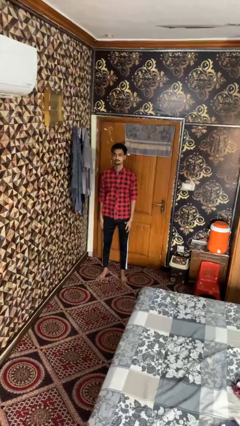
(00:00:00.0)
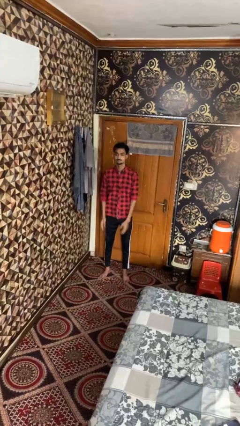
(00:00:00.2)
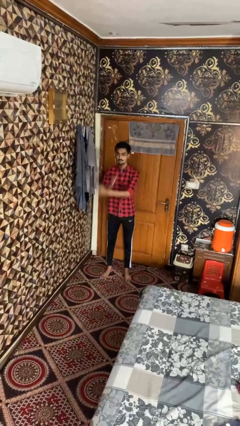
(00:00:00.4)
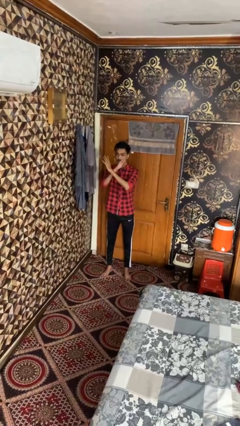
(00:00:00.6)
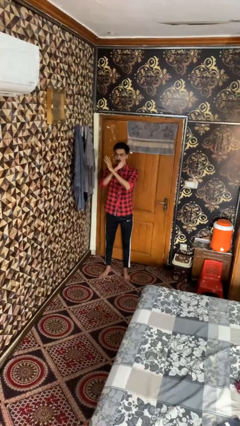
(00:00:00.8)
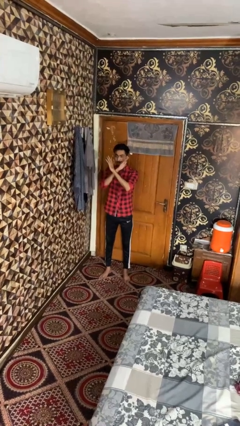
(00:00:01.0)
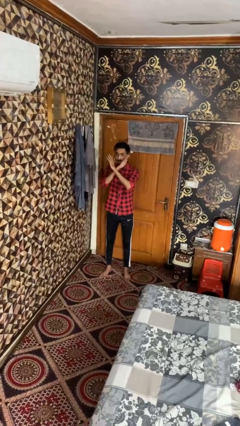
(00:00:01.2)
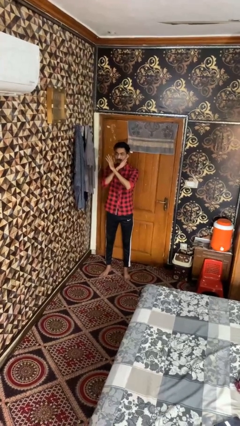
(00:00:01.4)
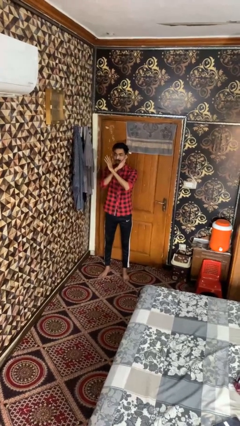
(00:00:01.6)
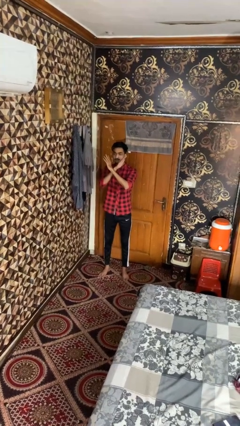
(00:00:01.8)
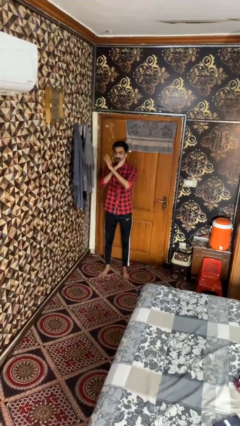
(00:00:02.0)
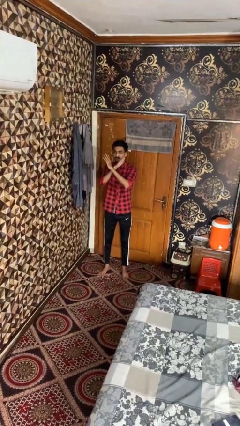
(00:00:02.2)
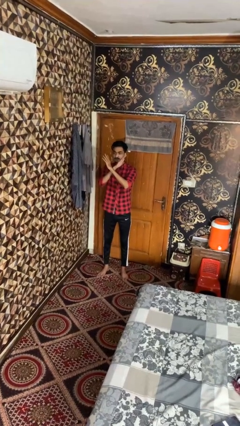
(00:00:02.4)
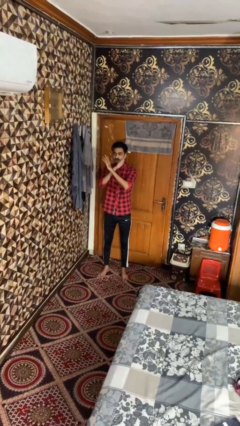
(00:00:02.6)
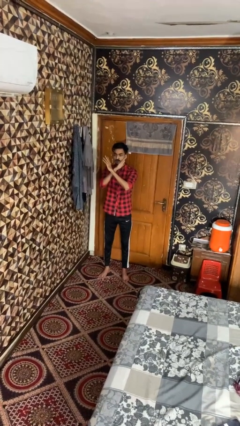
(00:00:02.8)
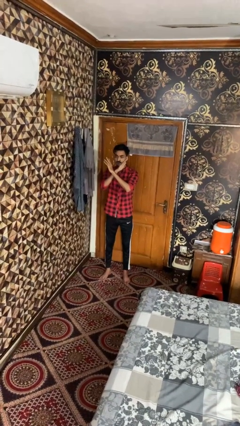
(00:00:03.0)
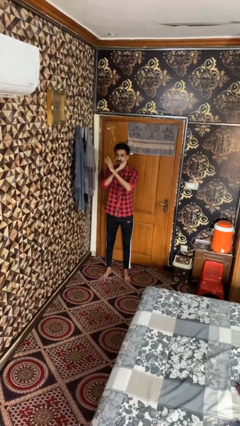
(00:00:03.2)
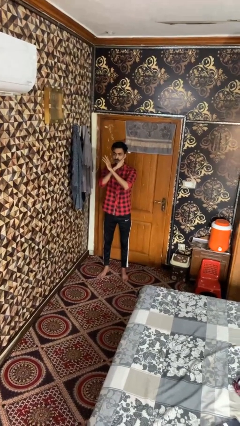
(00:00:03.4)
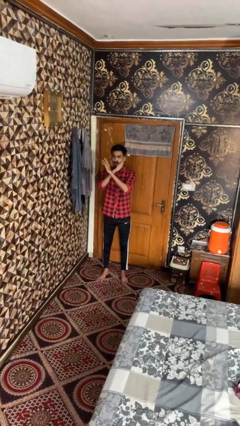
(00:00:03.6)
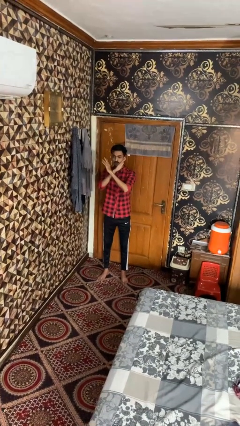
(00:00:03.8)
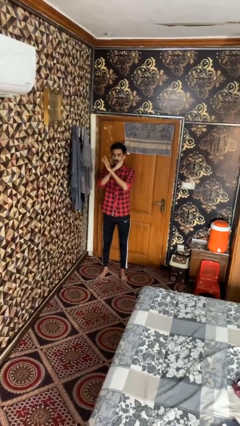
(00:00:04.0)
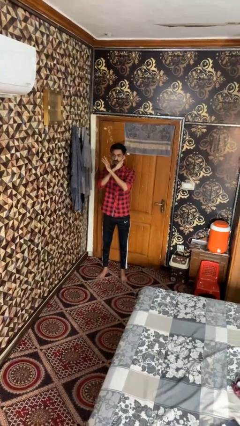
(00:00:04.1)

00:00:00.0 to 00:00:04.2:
person gestures arms x

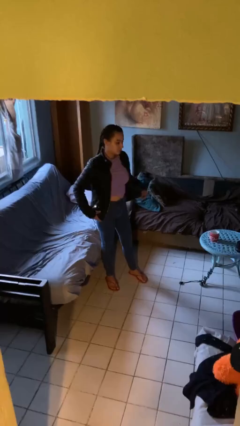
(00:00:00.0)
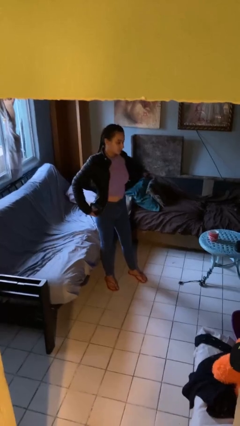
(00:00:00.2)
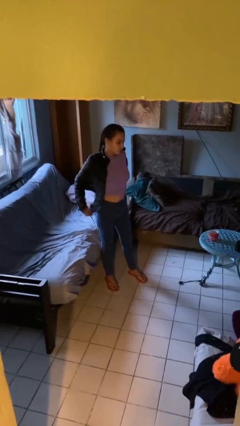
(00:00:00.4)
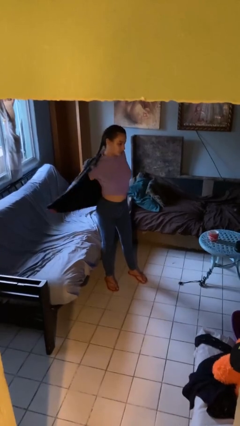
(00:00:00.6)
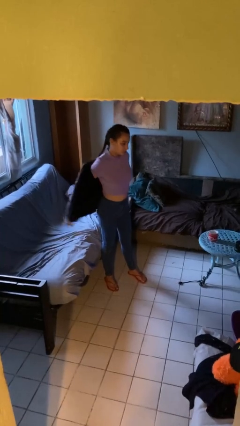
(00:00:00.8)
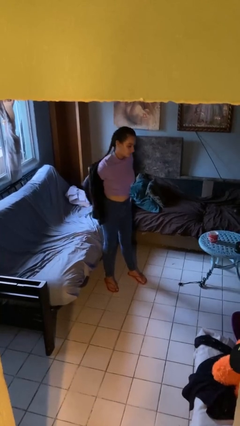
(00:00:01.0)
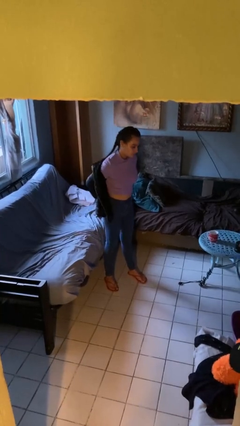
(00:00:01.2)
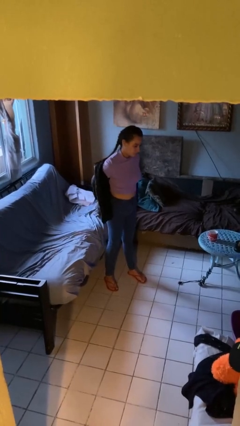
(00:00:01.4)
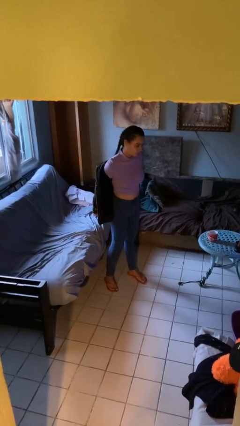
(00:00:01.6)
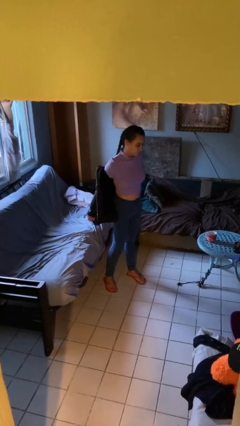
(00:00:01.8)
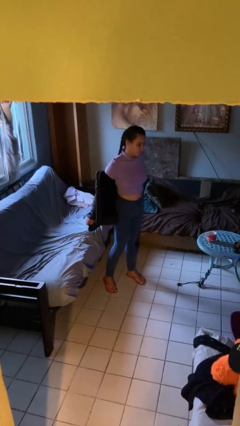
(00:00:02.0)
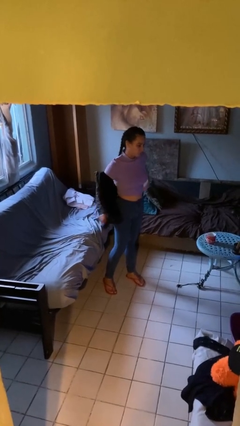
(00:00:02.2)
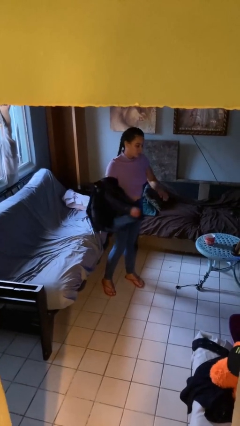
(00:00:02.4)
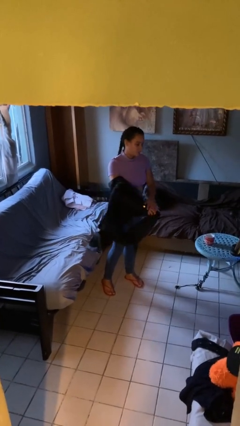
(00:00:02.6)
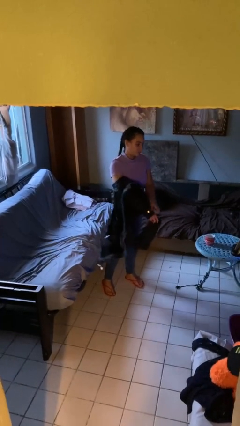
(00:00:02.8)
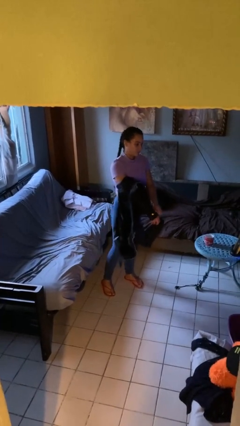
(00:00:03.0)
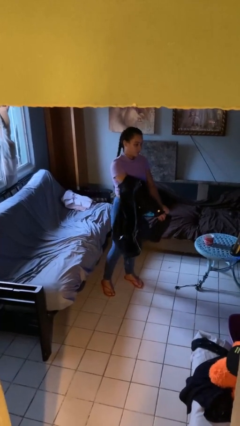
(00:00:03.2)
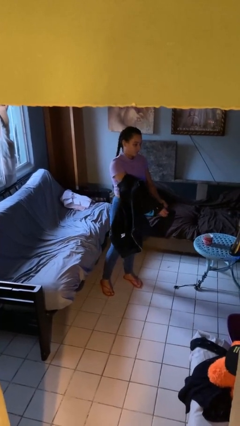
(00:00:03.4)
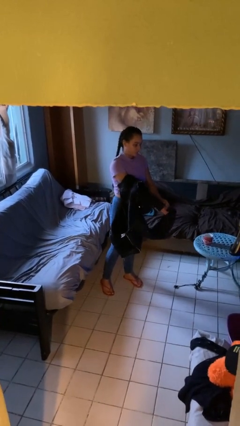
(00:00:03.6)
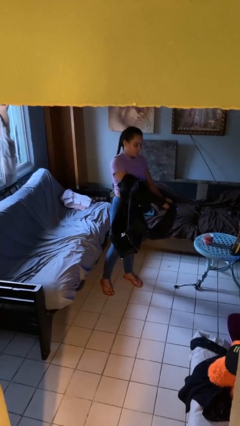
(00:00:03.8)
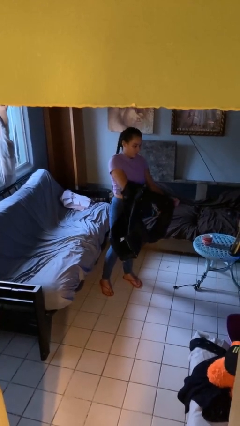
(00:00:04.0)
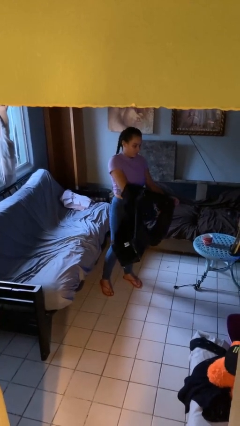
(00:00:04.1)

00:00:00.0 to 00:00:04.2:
person takes off jacket

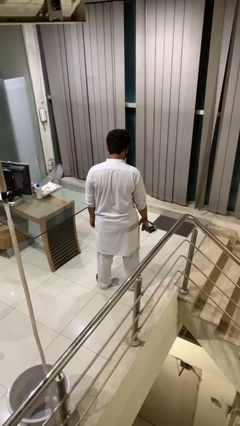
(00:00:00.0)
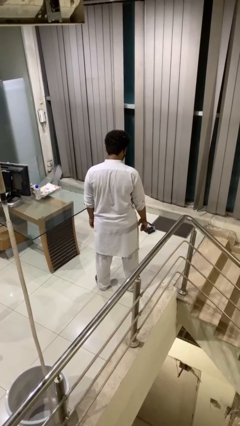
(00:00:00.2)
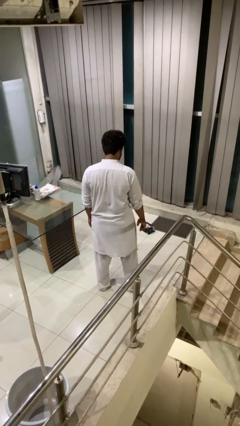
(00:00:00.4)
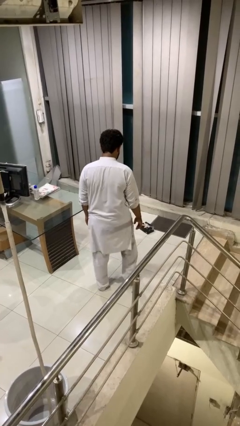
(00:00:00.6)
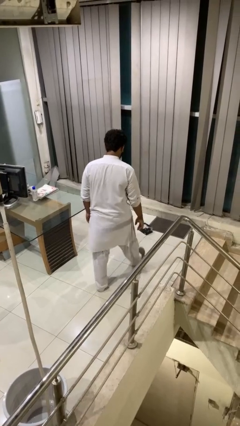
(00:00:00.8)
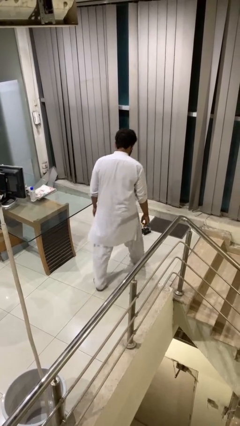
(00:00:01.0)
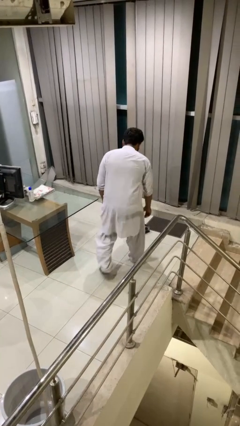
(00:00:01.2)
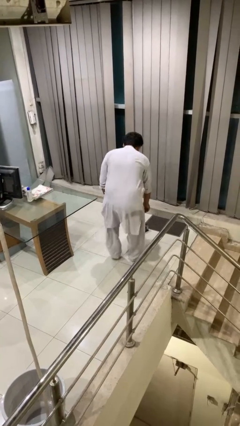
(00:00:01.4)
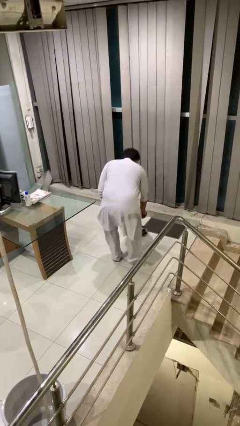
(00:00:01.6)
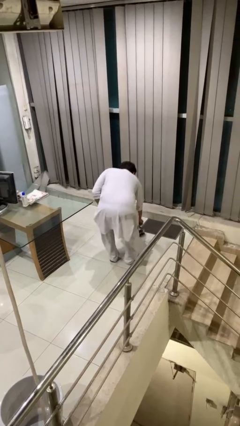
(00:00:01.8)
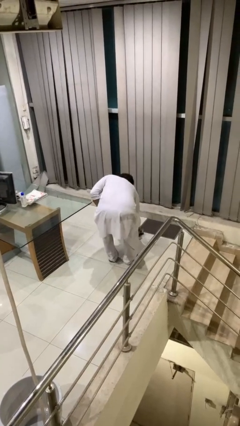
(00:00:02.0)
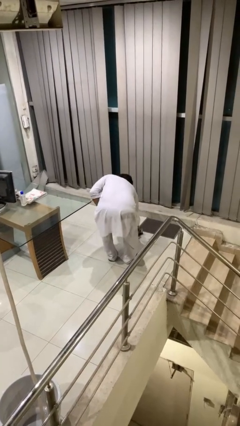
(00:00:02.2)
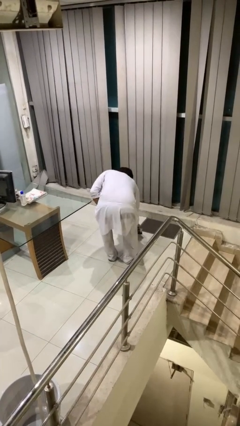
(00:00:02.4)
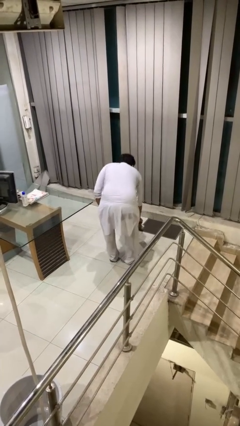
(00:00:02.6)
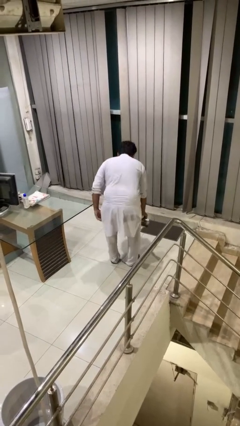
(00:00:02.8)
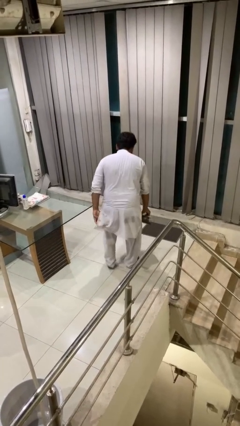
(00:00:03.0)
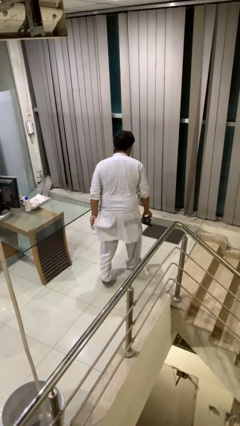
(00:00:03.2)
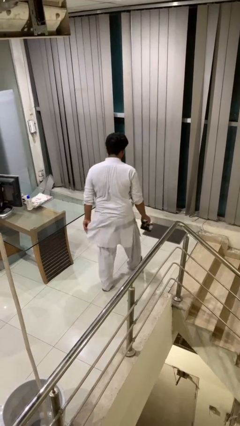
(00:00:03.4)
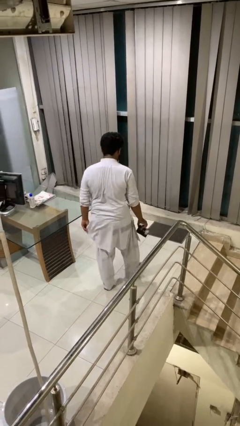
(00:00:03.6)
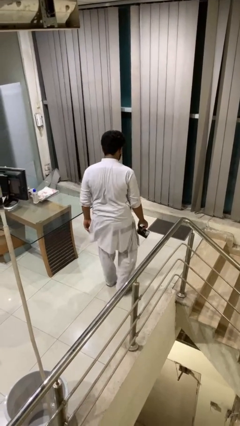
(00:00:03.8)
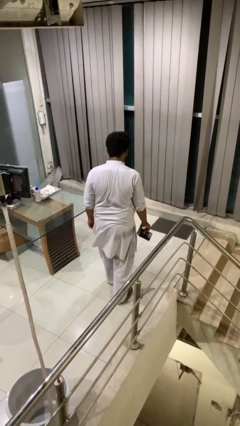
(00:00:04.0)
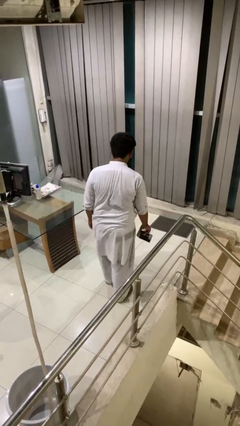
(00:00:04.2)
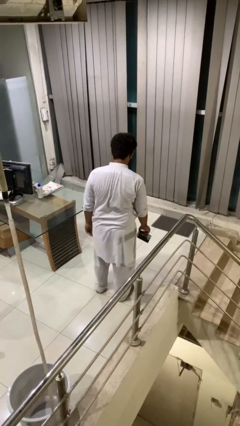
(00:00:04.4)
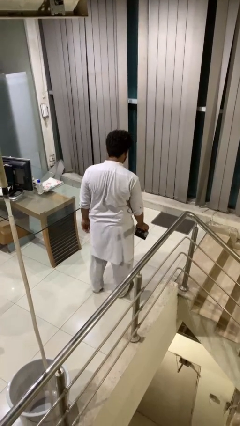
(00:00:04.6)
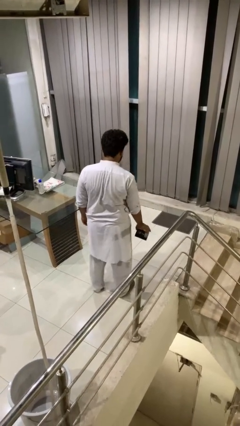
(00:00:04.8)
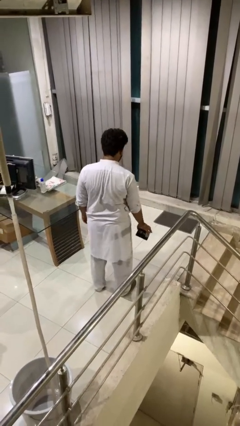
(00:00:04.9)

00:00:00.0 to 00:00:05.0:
person picks up object from floor

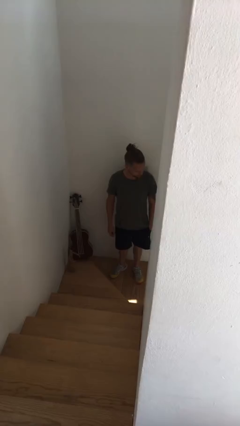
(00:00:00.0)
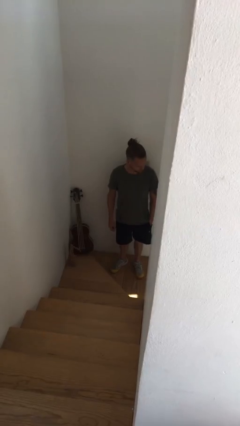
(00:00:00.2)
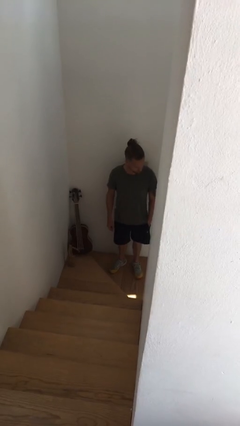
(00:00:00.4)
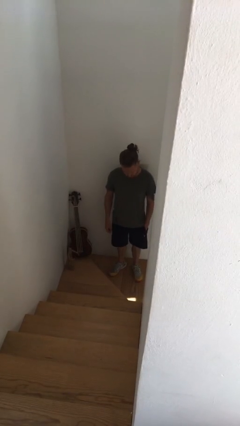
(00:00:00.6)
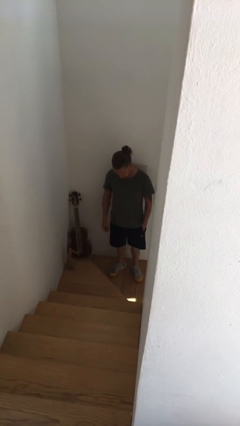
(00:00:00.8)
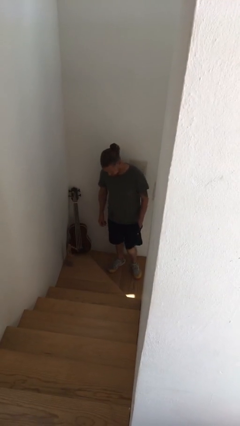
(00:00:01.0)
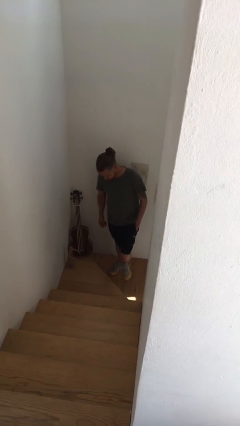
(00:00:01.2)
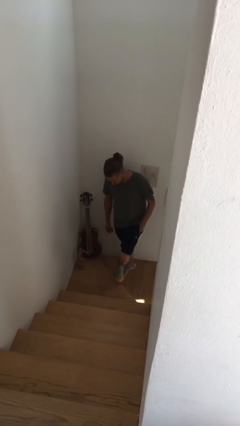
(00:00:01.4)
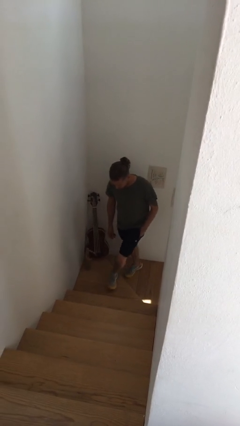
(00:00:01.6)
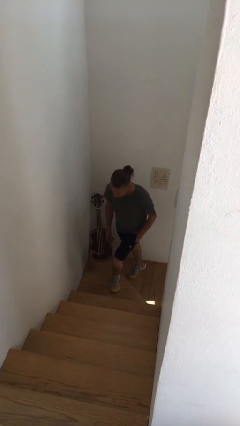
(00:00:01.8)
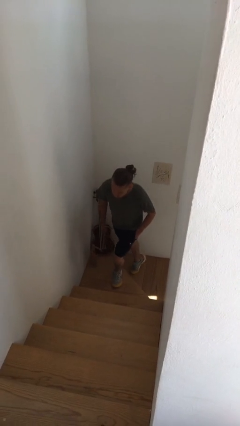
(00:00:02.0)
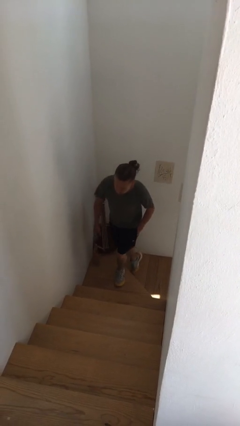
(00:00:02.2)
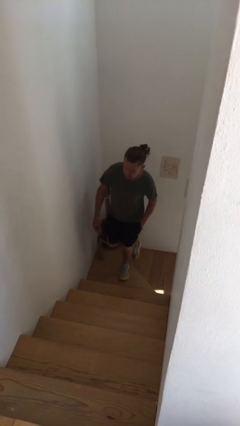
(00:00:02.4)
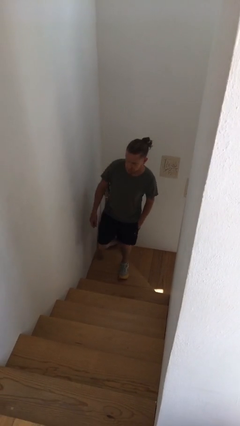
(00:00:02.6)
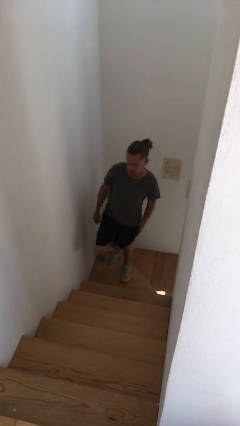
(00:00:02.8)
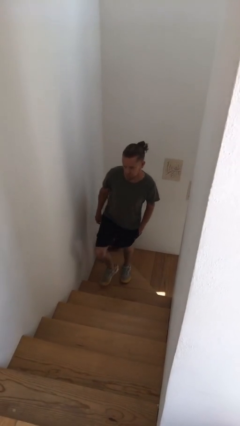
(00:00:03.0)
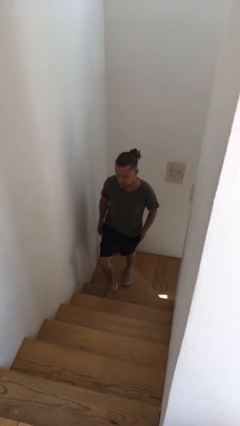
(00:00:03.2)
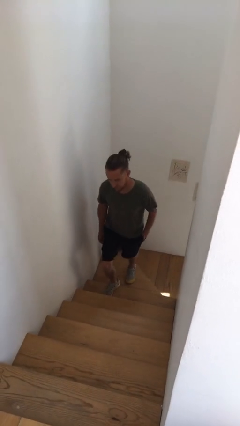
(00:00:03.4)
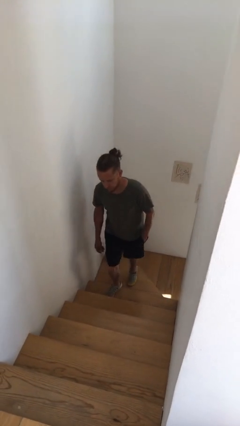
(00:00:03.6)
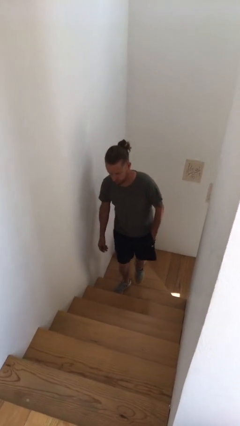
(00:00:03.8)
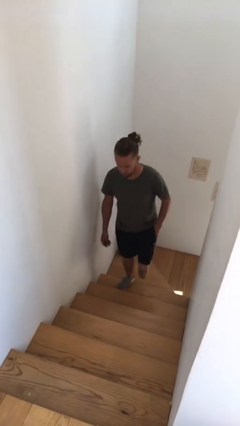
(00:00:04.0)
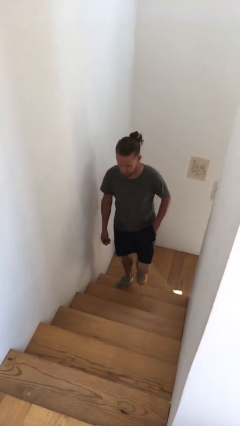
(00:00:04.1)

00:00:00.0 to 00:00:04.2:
person climbs up stairs
